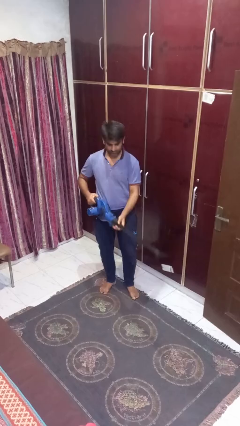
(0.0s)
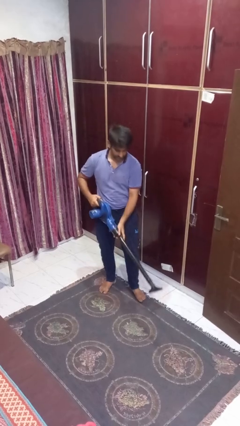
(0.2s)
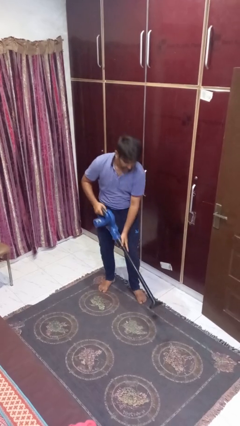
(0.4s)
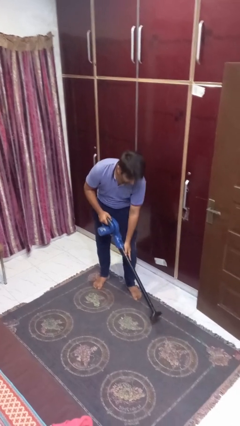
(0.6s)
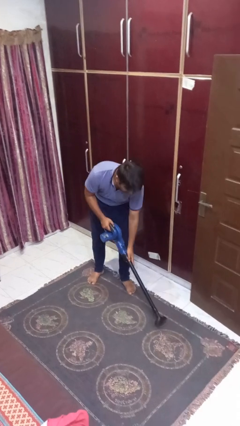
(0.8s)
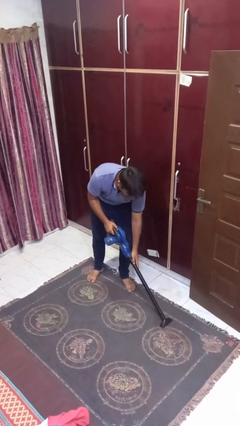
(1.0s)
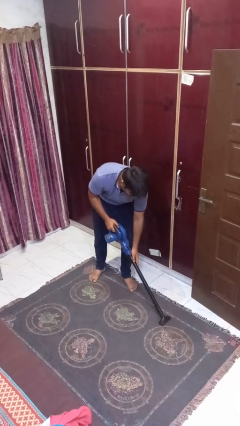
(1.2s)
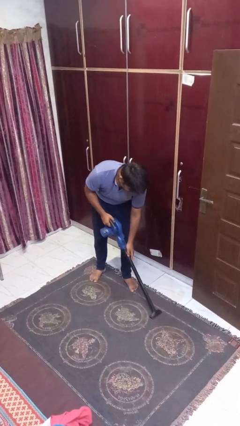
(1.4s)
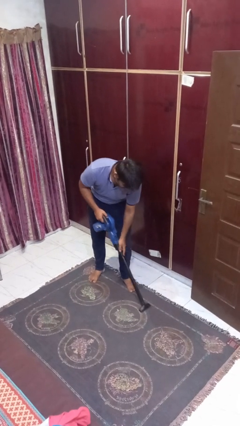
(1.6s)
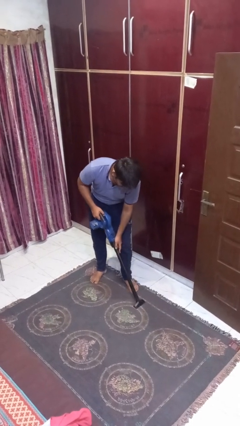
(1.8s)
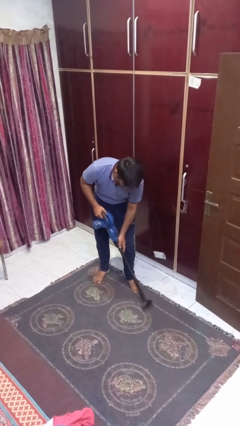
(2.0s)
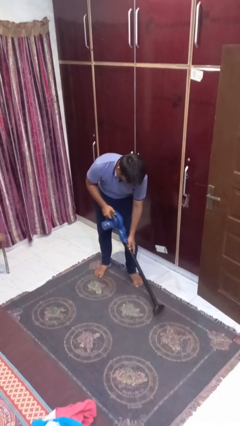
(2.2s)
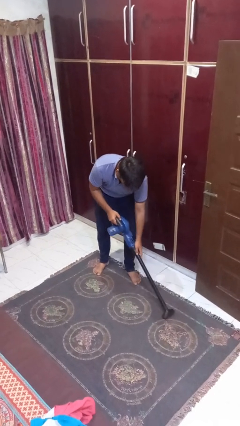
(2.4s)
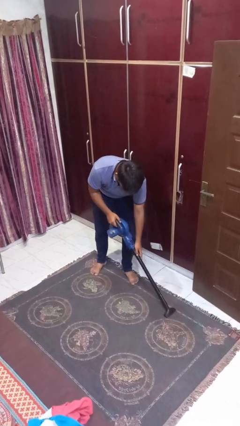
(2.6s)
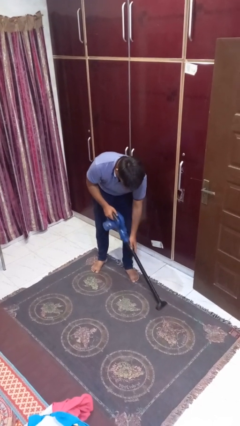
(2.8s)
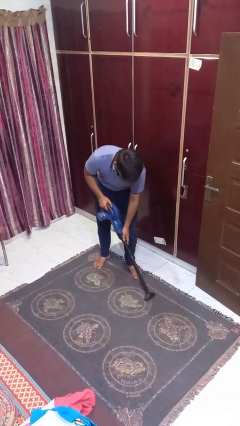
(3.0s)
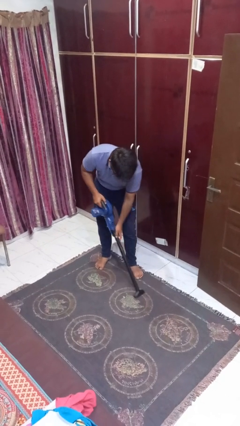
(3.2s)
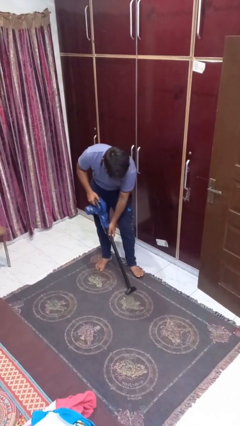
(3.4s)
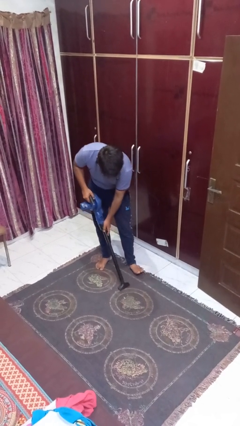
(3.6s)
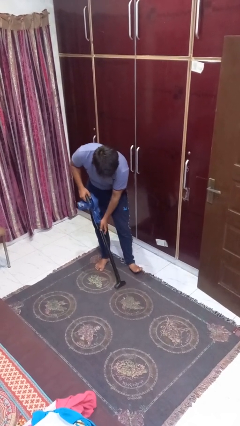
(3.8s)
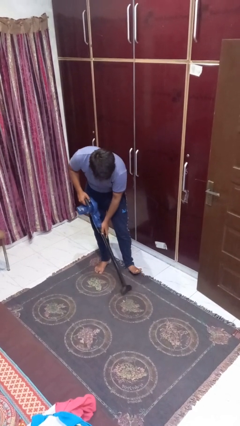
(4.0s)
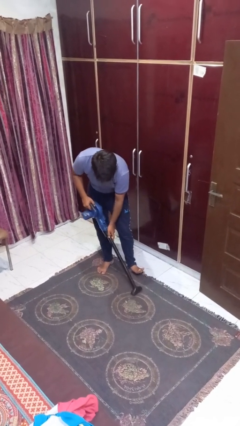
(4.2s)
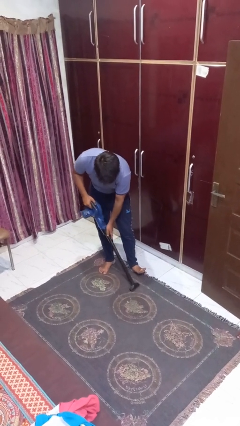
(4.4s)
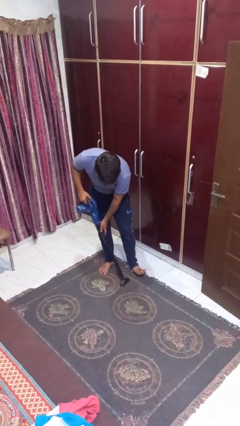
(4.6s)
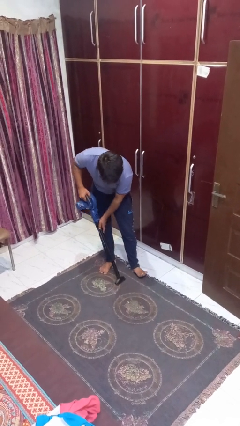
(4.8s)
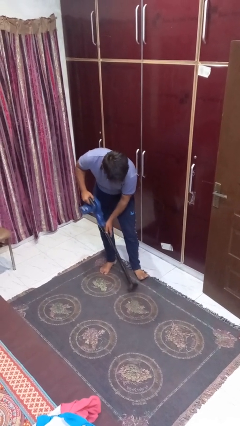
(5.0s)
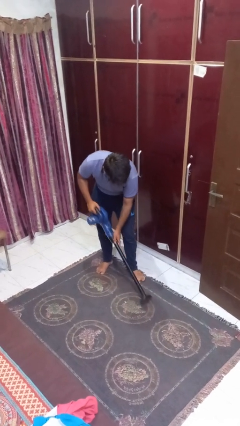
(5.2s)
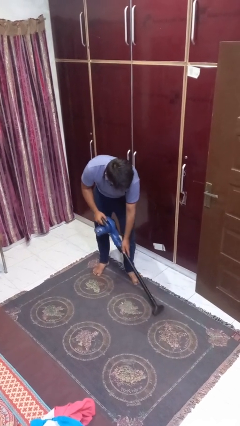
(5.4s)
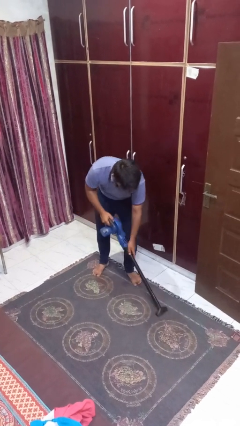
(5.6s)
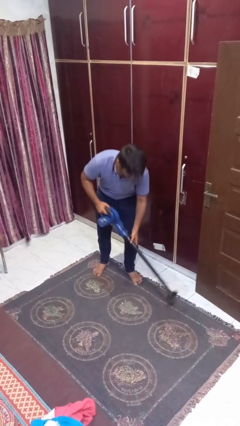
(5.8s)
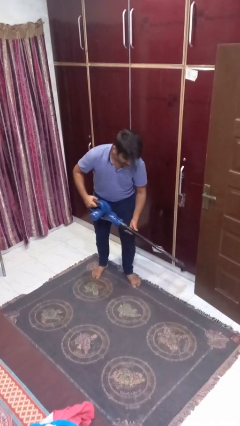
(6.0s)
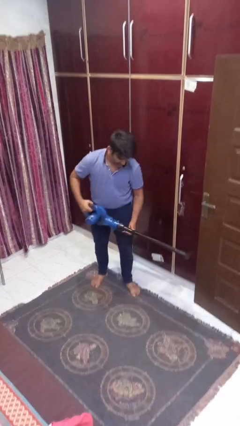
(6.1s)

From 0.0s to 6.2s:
person vacuums carpet

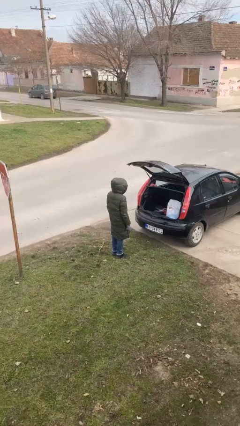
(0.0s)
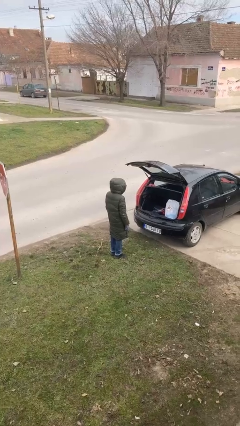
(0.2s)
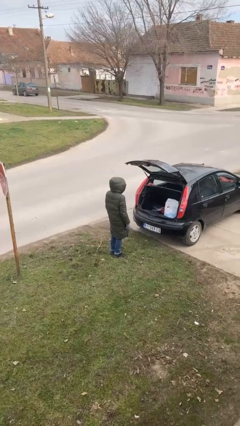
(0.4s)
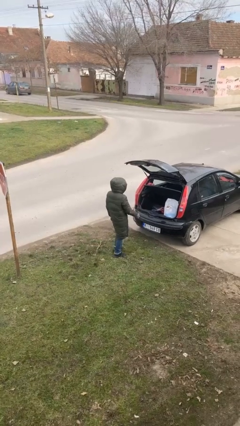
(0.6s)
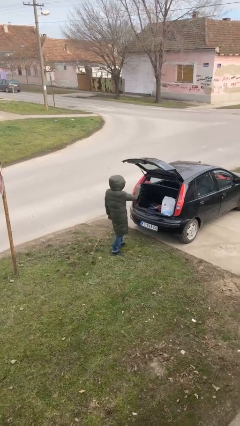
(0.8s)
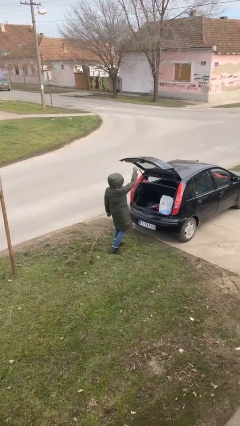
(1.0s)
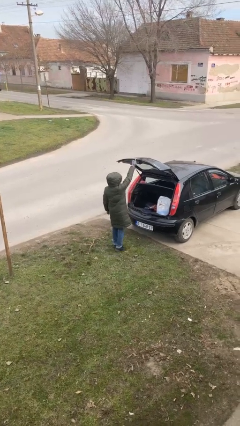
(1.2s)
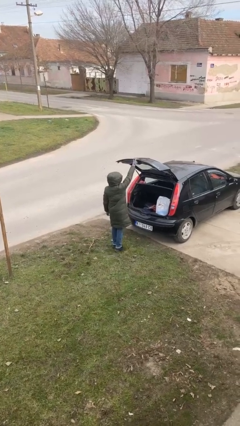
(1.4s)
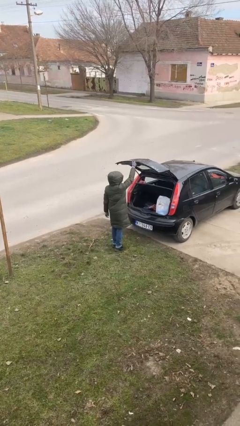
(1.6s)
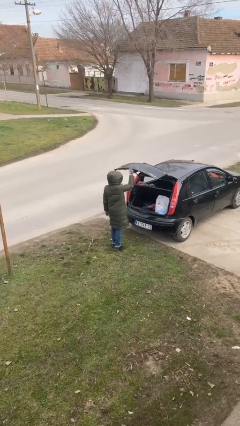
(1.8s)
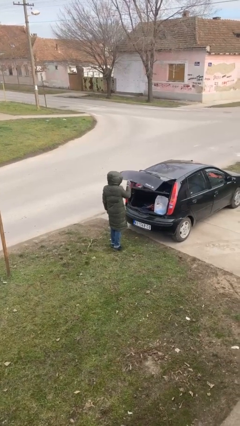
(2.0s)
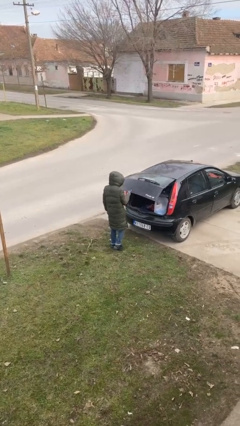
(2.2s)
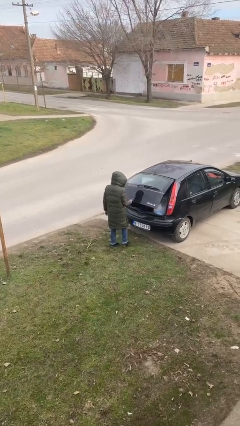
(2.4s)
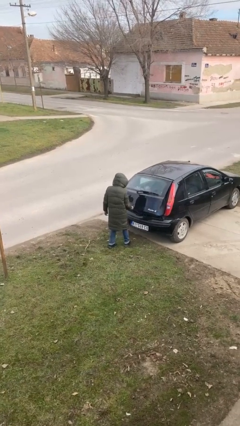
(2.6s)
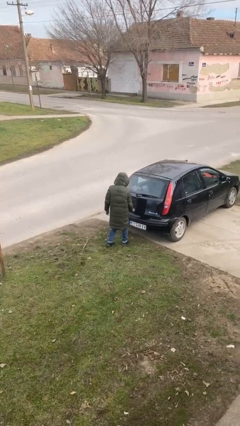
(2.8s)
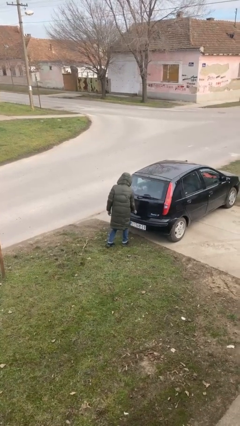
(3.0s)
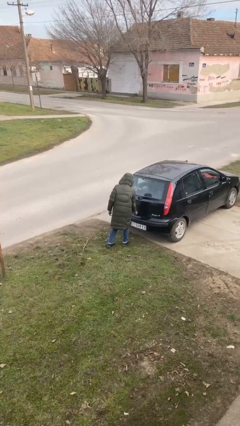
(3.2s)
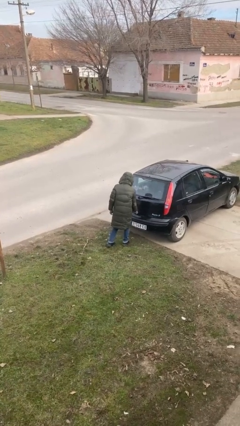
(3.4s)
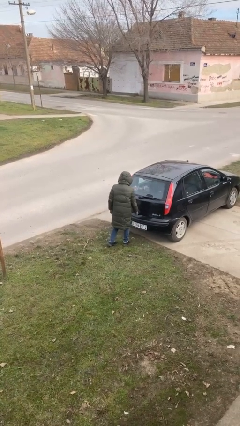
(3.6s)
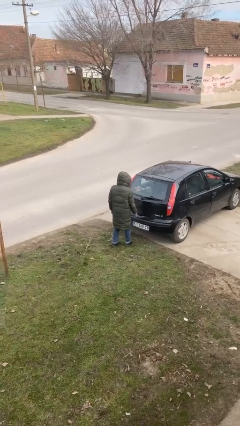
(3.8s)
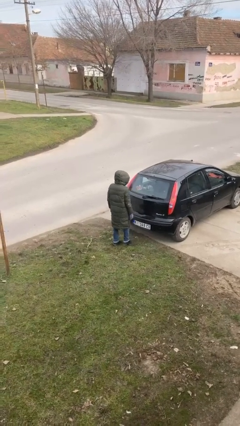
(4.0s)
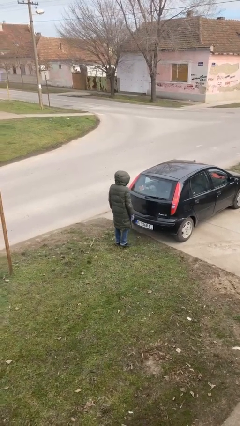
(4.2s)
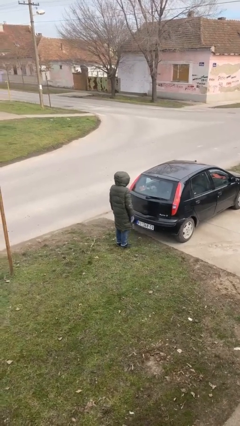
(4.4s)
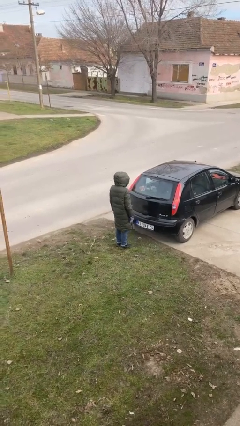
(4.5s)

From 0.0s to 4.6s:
person closes car trunk

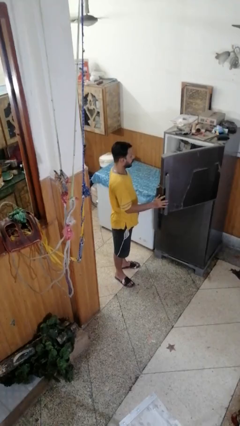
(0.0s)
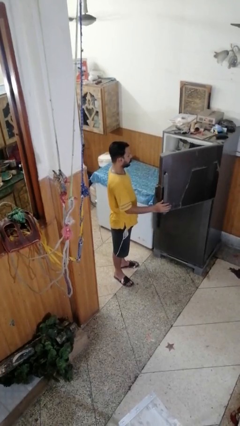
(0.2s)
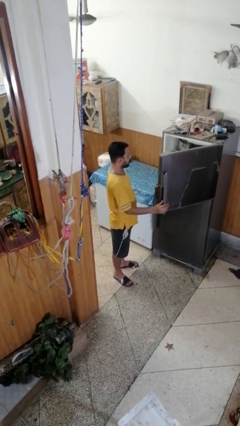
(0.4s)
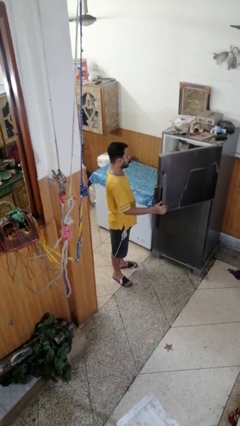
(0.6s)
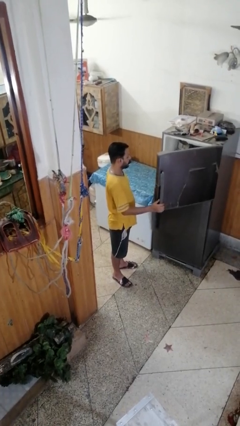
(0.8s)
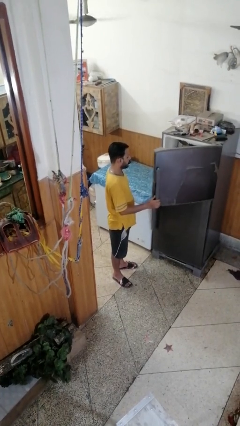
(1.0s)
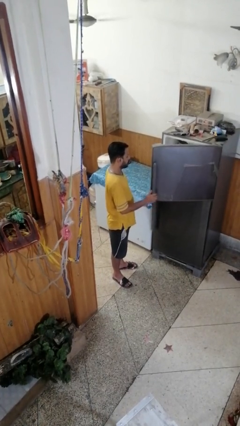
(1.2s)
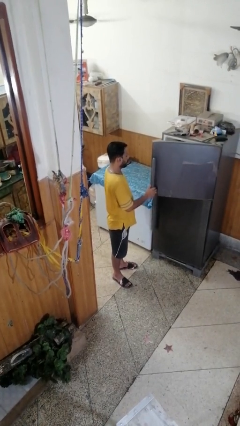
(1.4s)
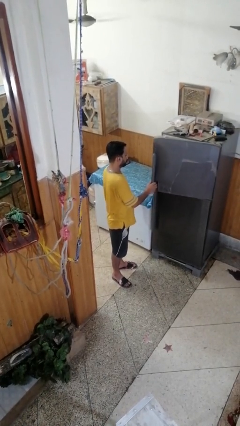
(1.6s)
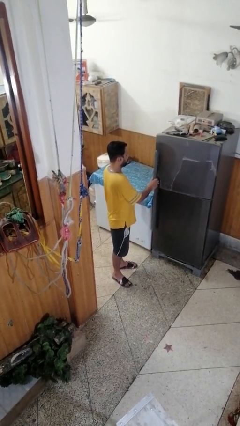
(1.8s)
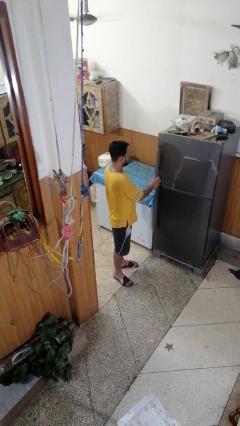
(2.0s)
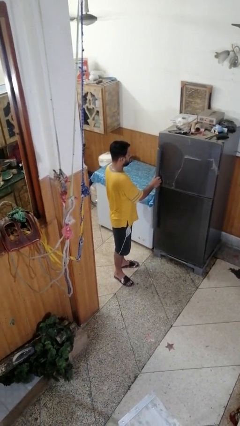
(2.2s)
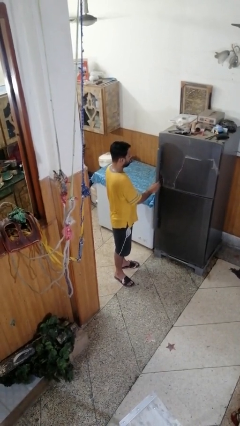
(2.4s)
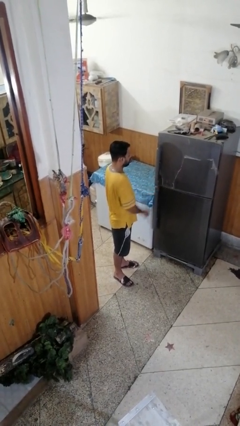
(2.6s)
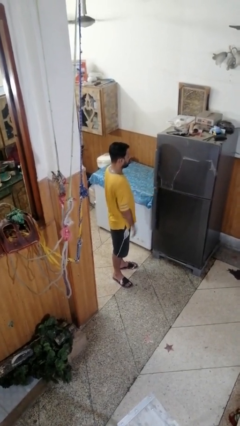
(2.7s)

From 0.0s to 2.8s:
person closes refrigerator

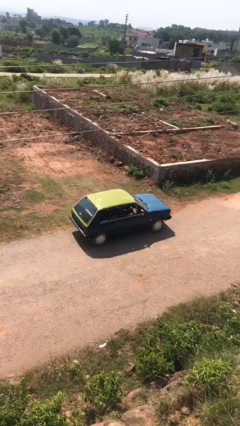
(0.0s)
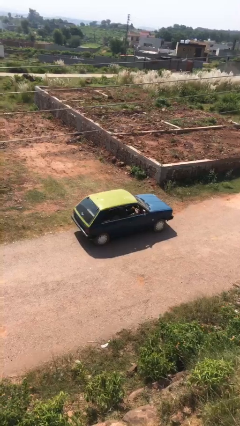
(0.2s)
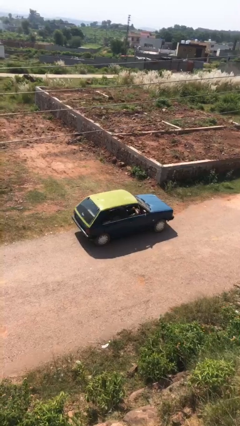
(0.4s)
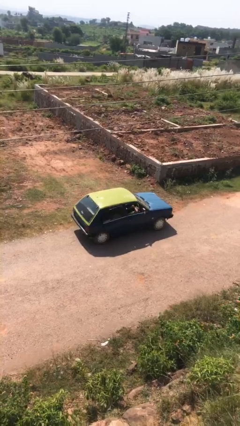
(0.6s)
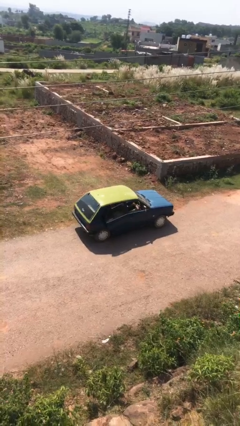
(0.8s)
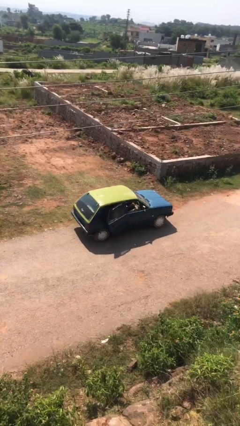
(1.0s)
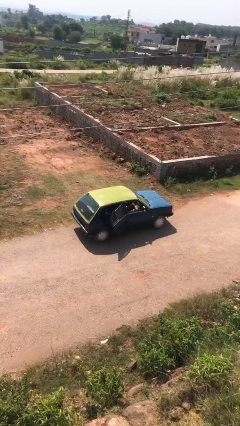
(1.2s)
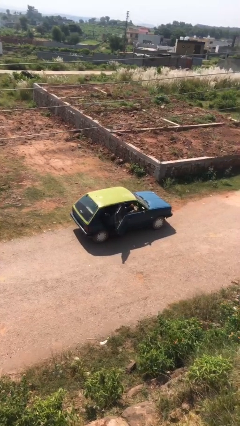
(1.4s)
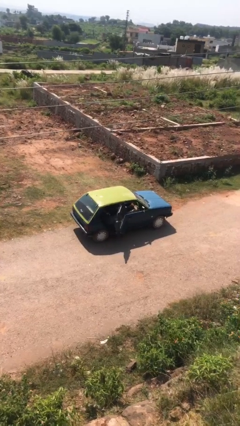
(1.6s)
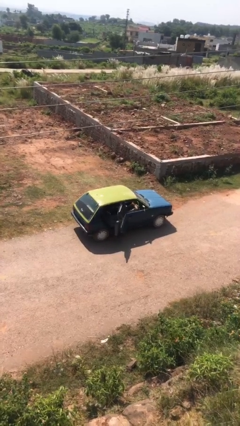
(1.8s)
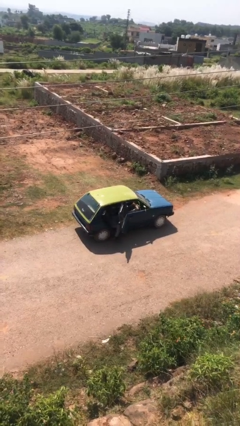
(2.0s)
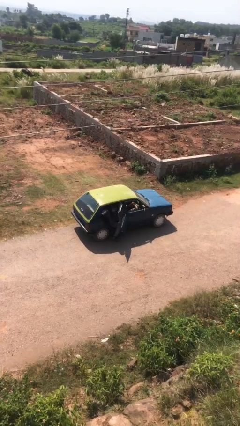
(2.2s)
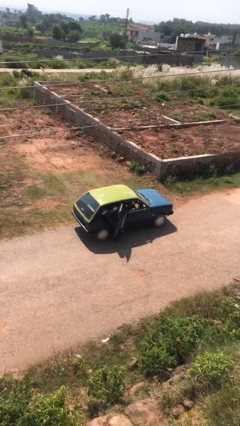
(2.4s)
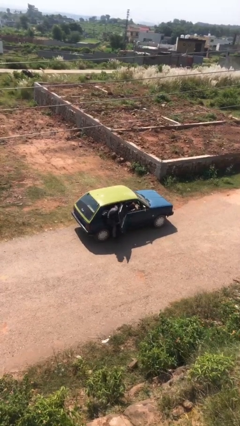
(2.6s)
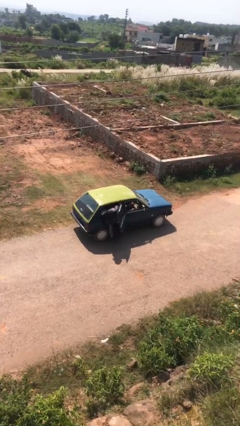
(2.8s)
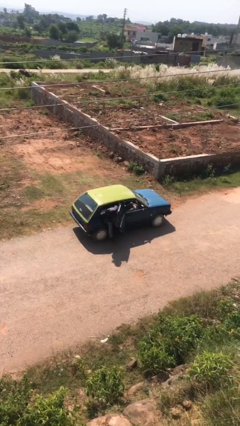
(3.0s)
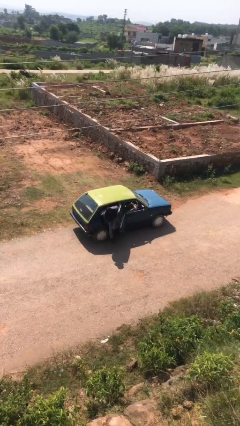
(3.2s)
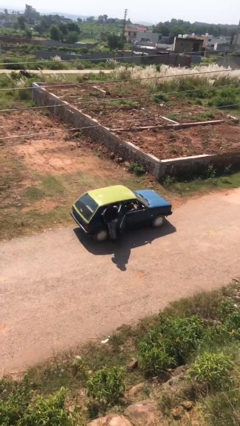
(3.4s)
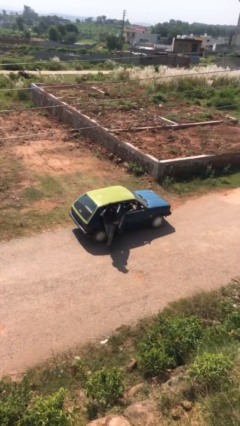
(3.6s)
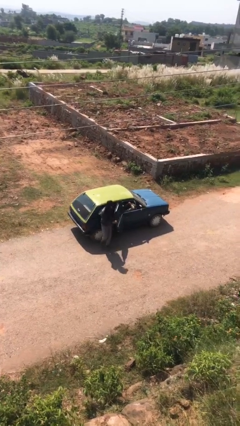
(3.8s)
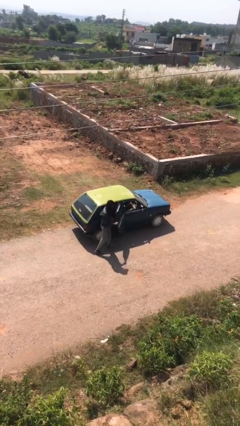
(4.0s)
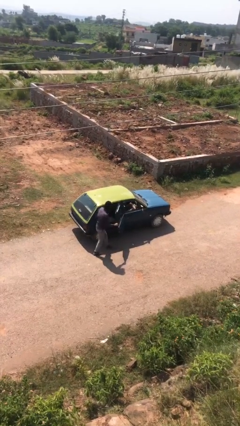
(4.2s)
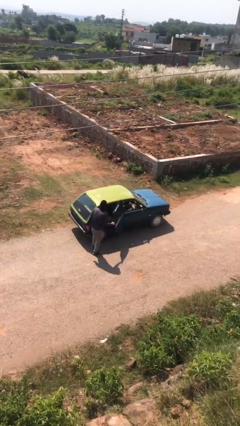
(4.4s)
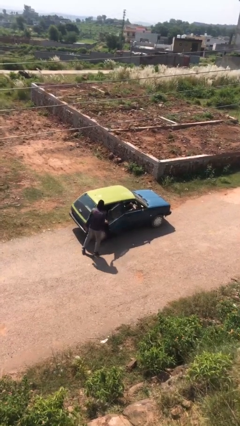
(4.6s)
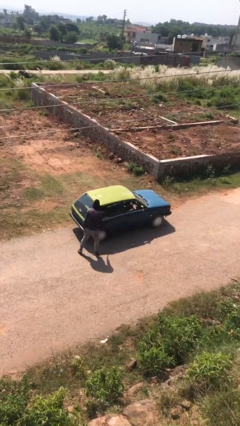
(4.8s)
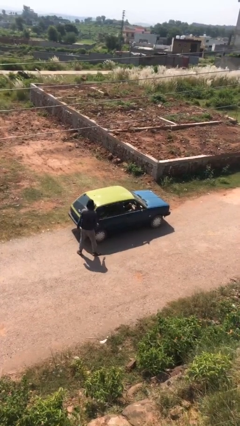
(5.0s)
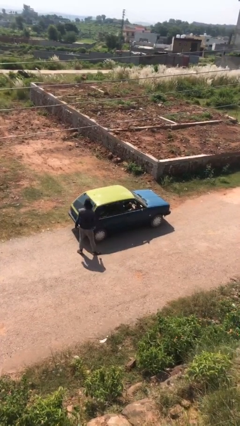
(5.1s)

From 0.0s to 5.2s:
car drops off person
